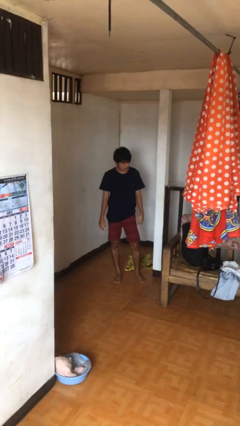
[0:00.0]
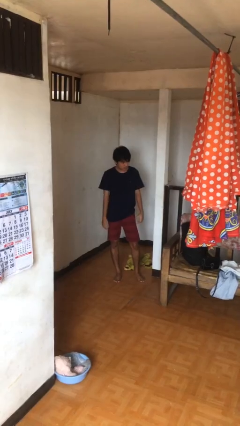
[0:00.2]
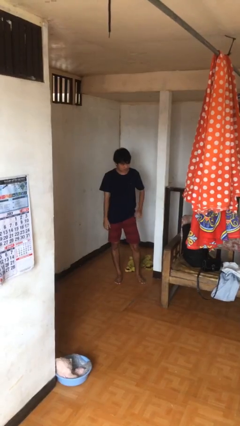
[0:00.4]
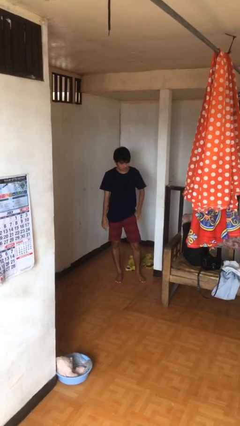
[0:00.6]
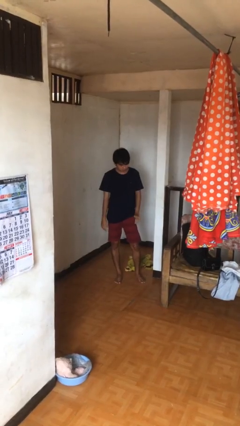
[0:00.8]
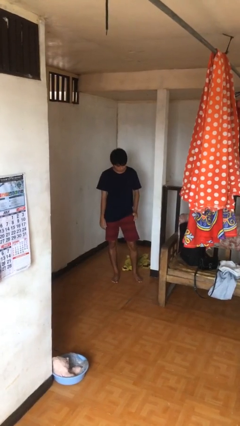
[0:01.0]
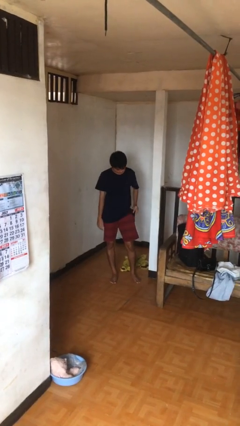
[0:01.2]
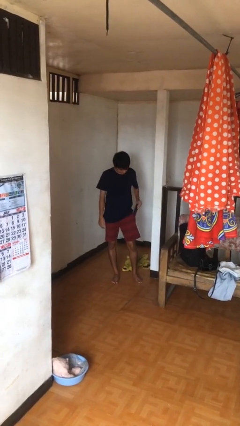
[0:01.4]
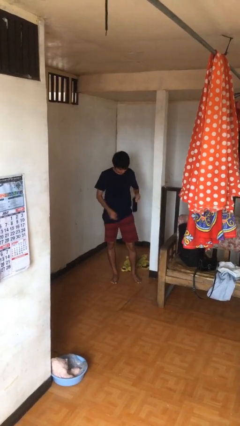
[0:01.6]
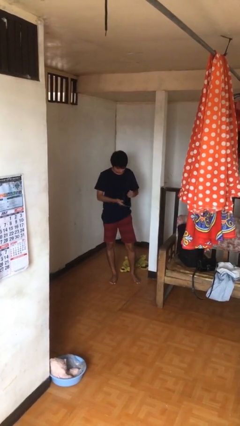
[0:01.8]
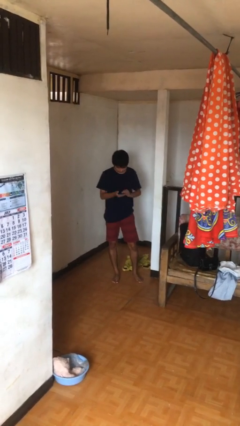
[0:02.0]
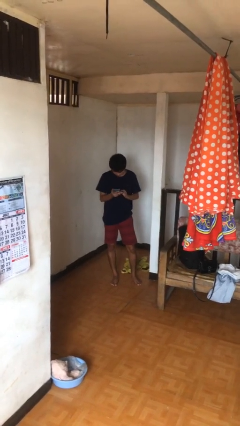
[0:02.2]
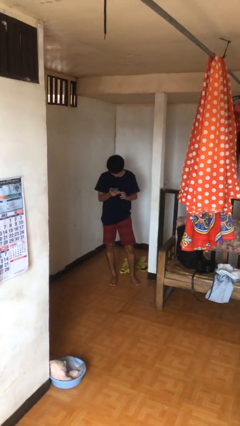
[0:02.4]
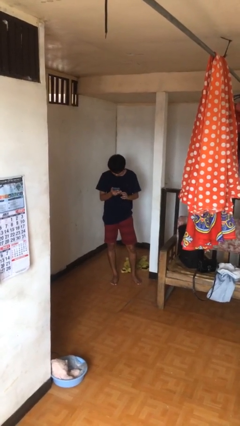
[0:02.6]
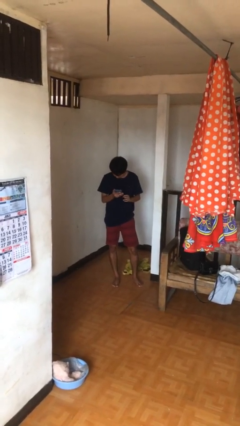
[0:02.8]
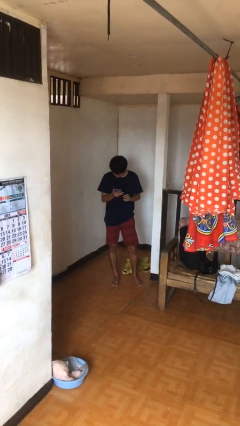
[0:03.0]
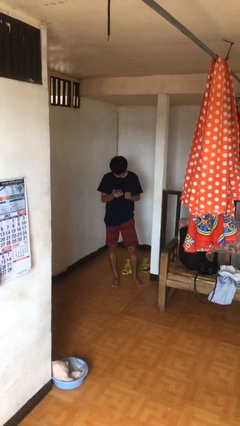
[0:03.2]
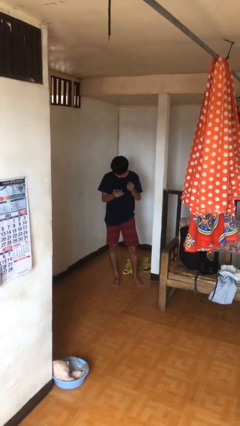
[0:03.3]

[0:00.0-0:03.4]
person takes phone from pocket

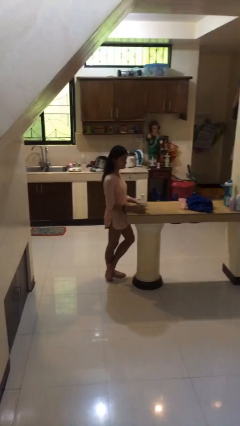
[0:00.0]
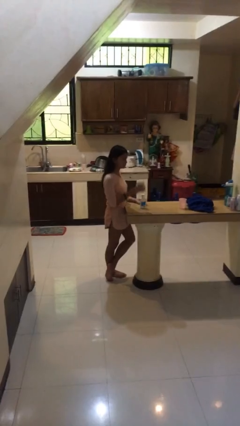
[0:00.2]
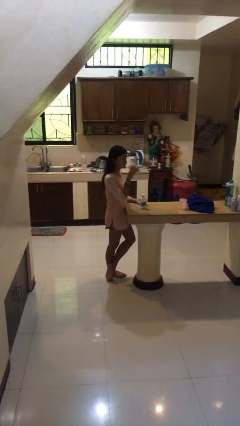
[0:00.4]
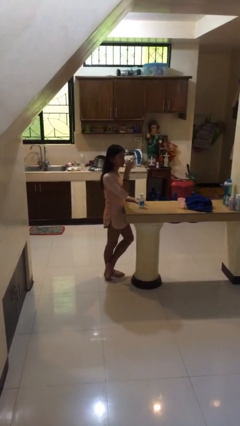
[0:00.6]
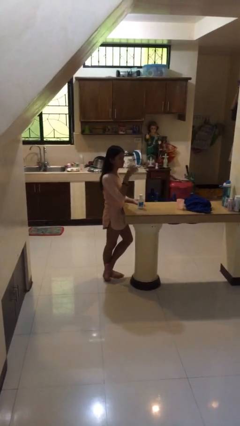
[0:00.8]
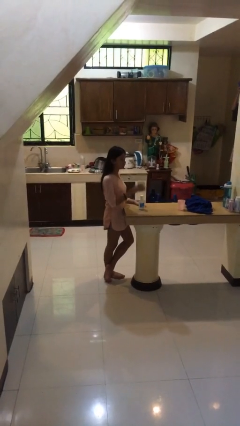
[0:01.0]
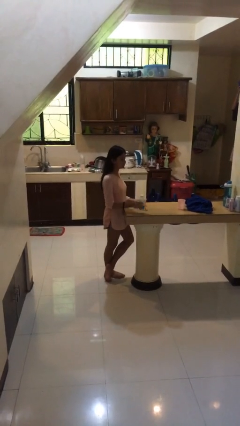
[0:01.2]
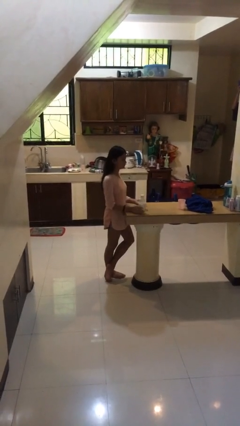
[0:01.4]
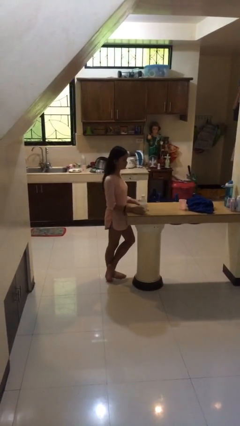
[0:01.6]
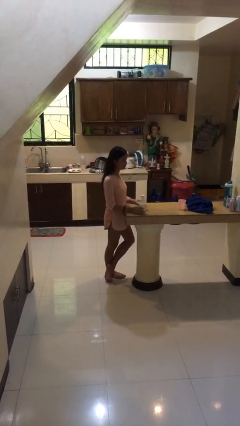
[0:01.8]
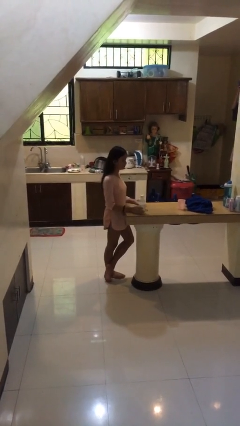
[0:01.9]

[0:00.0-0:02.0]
person drinks from cup

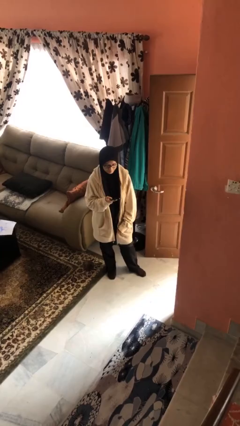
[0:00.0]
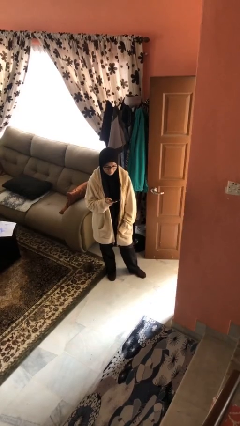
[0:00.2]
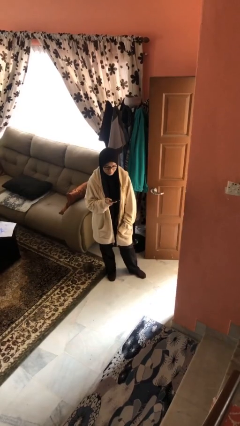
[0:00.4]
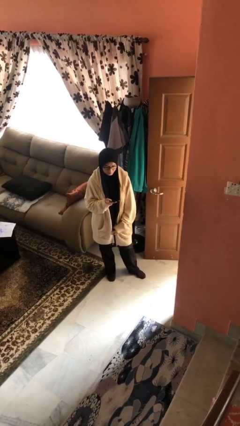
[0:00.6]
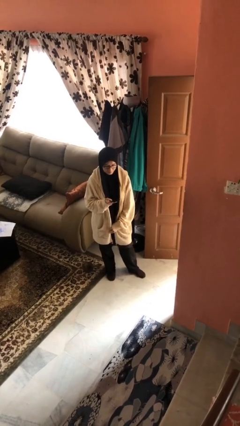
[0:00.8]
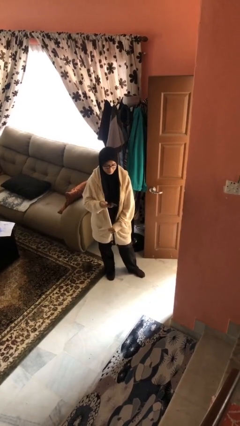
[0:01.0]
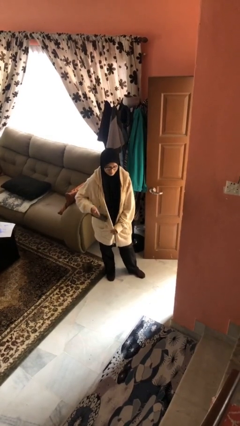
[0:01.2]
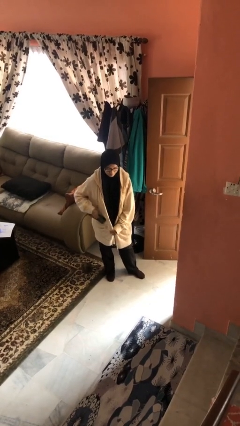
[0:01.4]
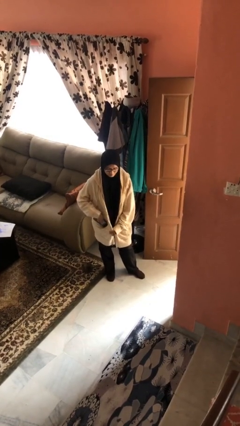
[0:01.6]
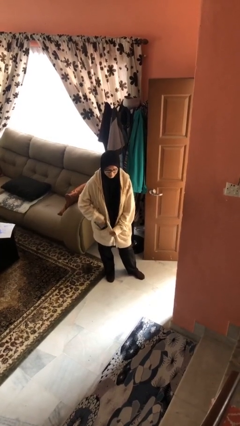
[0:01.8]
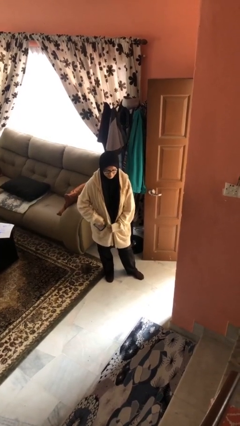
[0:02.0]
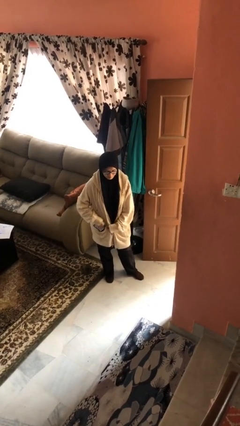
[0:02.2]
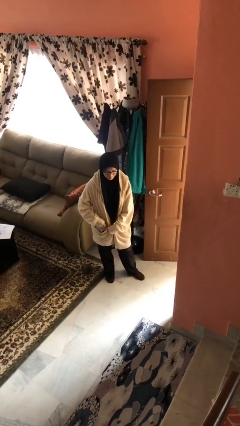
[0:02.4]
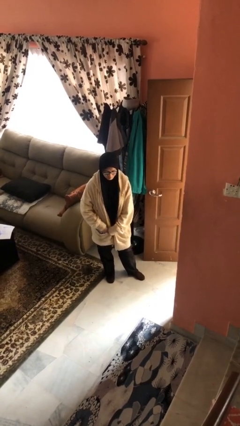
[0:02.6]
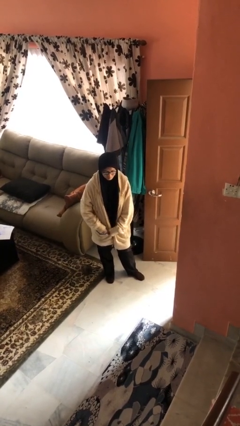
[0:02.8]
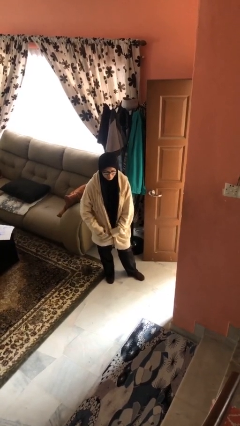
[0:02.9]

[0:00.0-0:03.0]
person puts phone into pocket

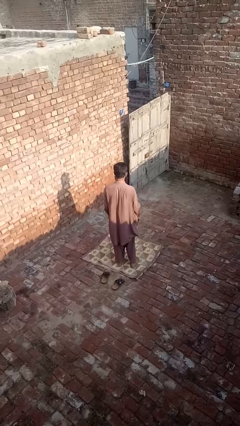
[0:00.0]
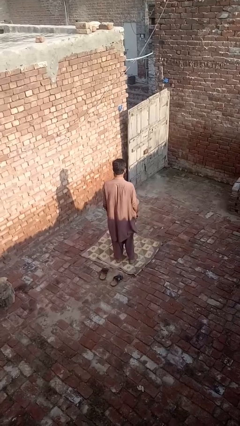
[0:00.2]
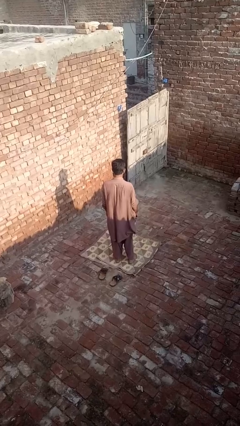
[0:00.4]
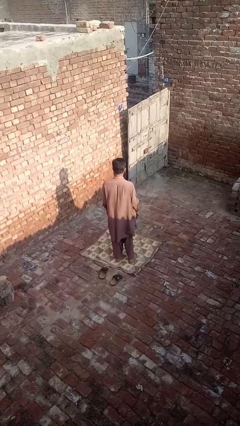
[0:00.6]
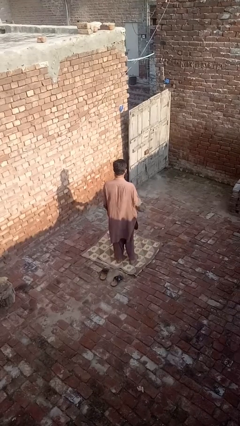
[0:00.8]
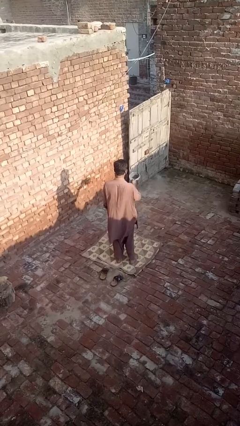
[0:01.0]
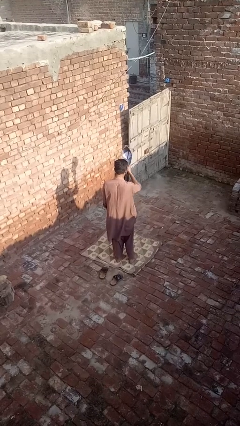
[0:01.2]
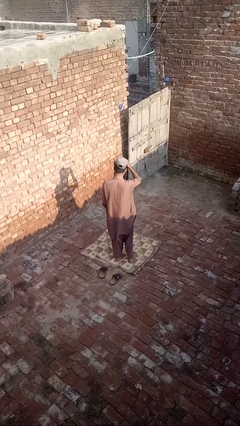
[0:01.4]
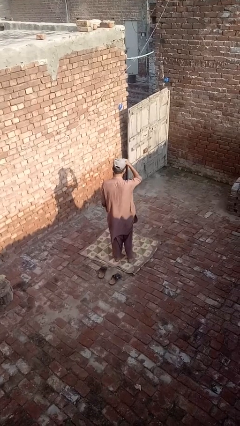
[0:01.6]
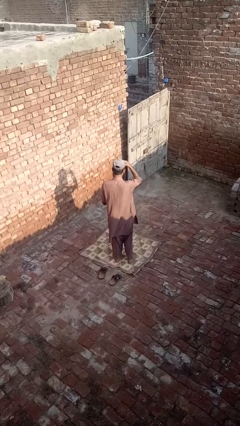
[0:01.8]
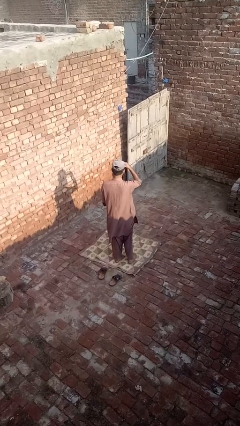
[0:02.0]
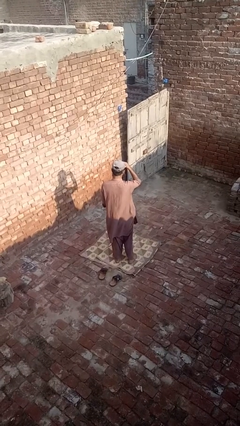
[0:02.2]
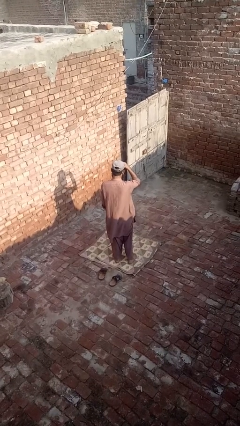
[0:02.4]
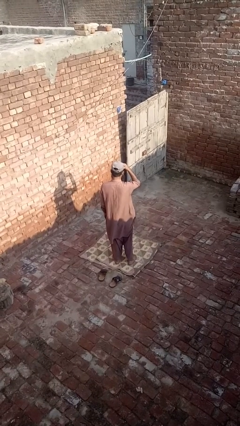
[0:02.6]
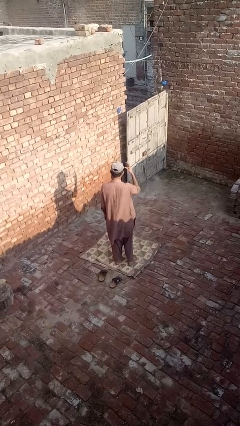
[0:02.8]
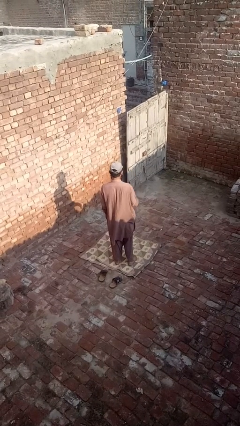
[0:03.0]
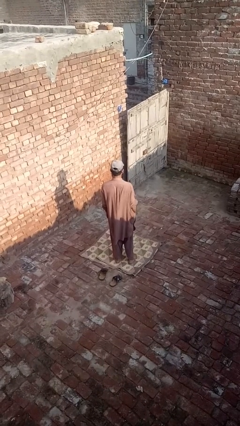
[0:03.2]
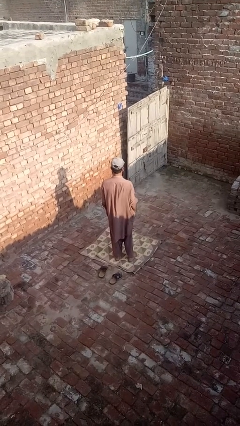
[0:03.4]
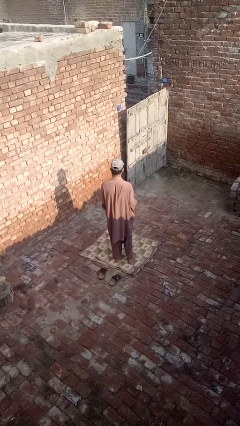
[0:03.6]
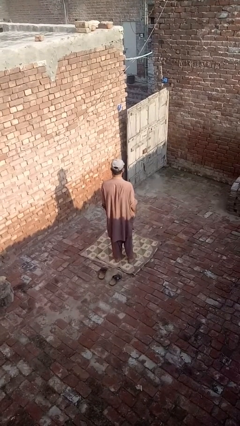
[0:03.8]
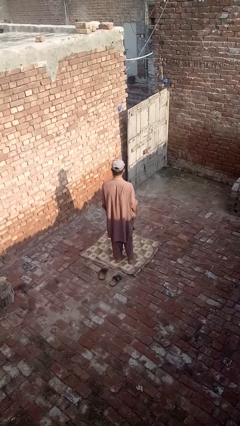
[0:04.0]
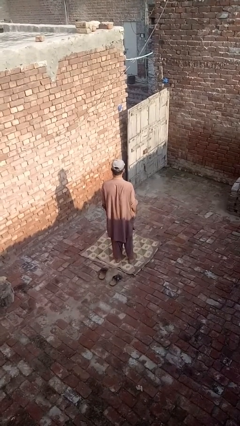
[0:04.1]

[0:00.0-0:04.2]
person puts on hat

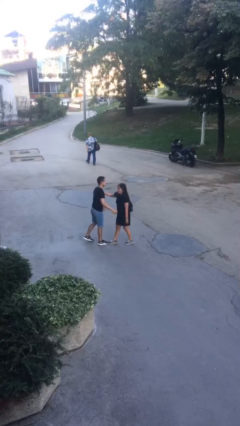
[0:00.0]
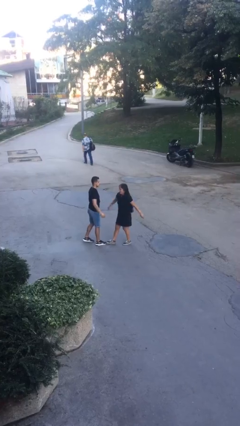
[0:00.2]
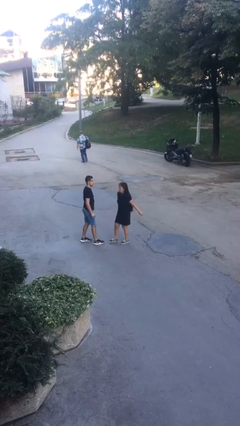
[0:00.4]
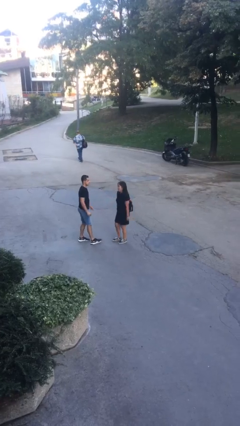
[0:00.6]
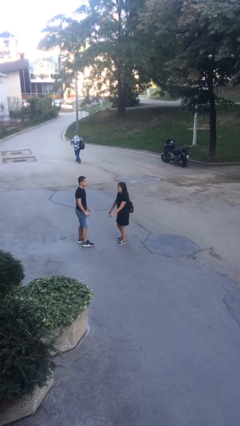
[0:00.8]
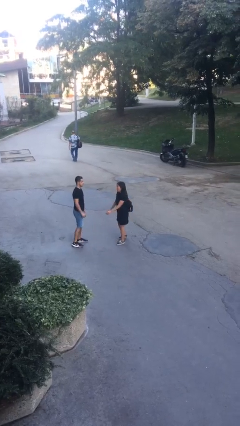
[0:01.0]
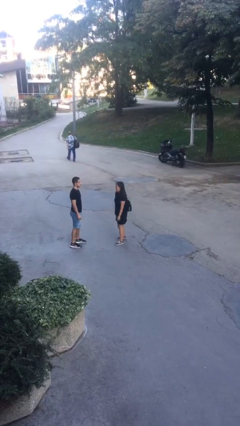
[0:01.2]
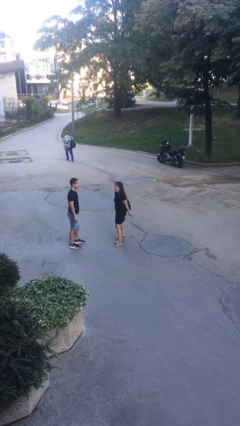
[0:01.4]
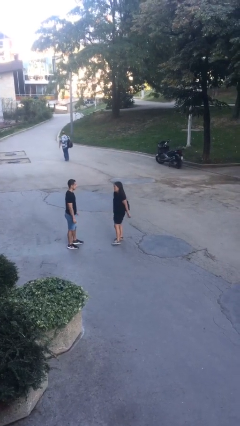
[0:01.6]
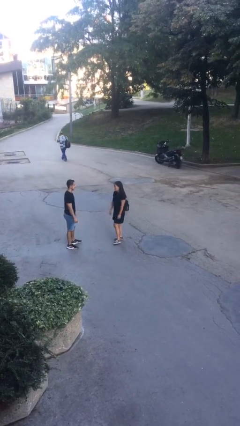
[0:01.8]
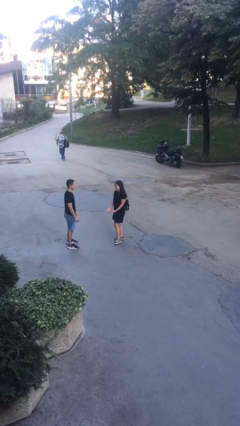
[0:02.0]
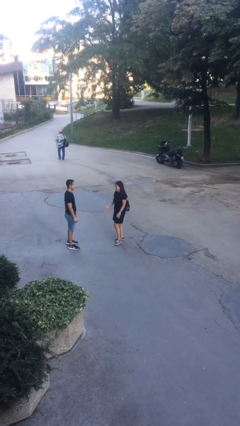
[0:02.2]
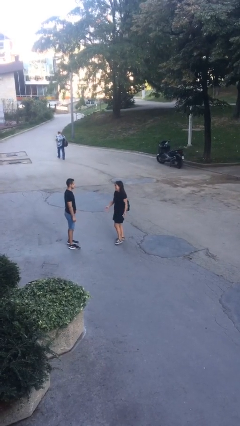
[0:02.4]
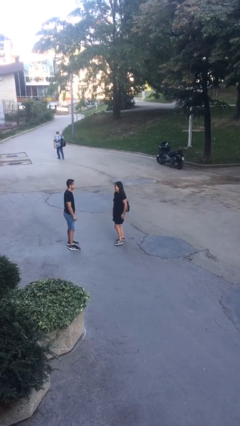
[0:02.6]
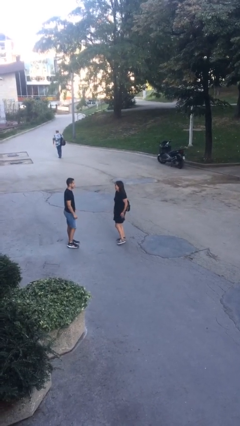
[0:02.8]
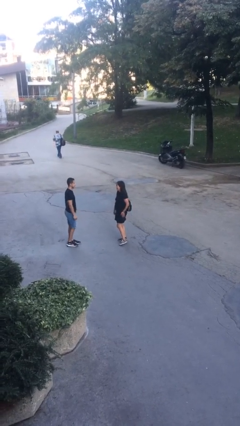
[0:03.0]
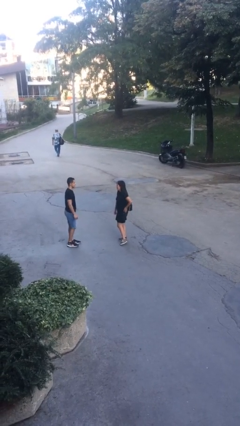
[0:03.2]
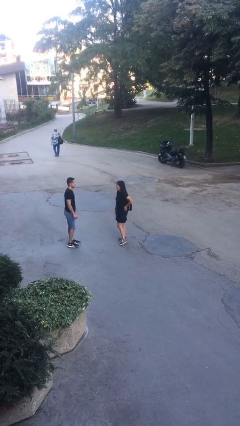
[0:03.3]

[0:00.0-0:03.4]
person talks to person

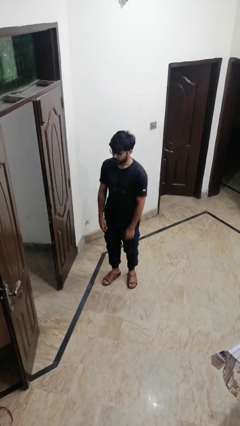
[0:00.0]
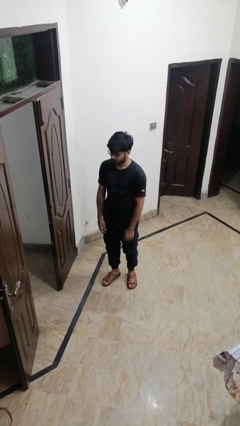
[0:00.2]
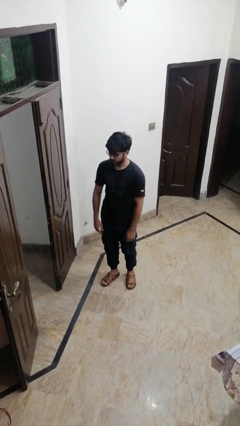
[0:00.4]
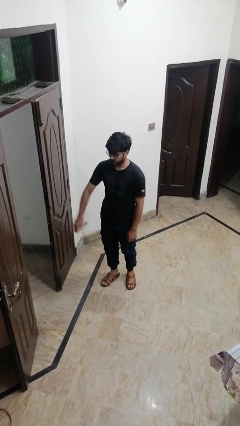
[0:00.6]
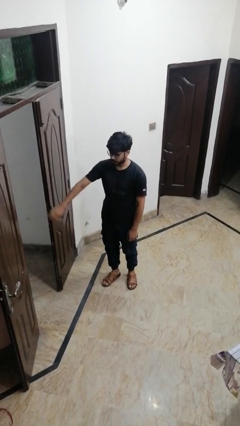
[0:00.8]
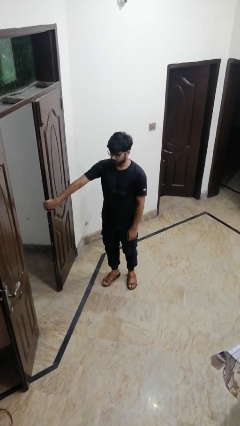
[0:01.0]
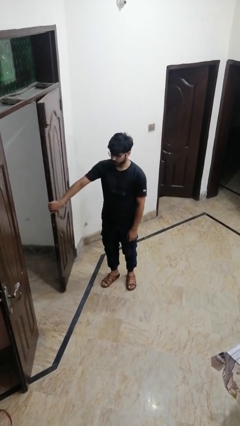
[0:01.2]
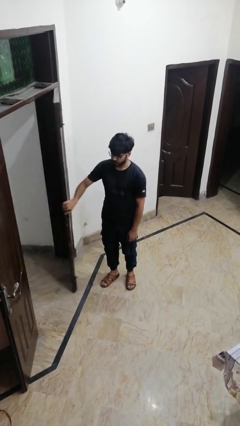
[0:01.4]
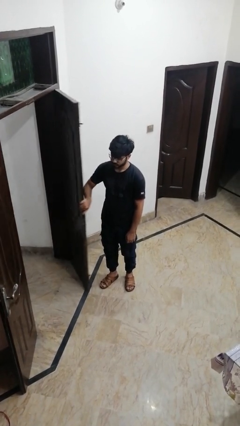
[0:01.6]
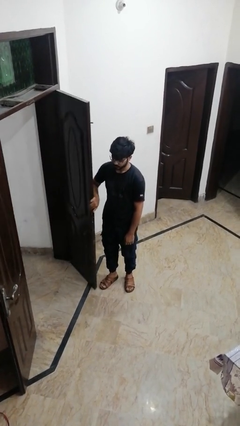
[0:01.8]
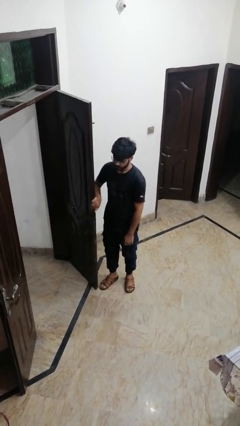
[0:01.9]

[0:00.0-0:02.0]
person opens facility door
